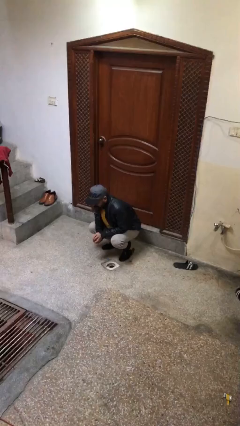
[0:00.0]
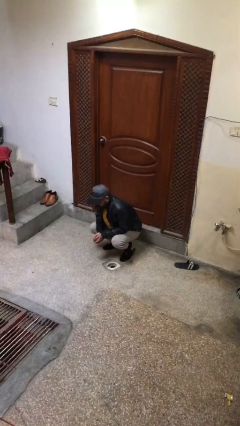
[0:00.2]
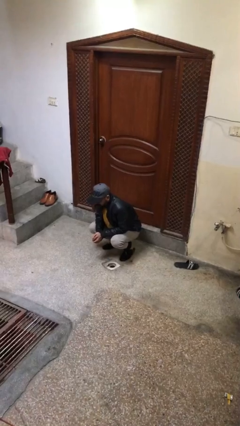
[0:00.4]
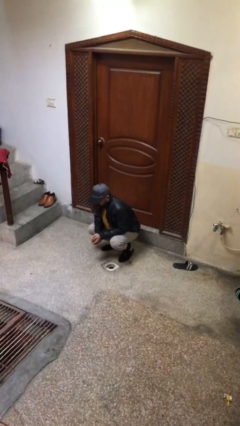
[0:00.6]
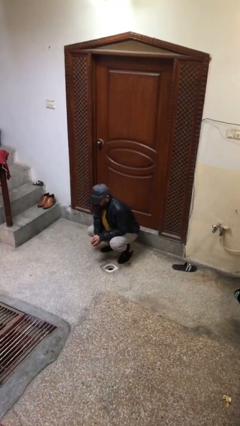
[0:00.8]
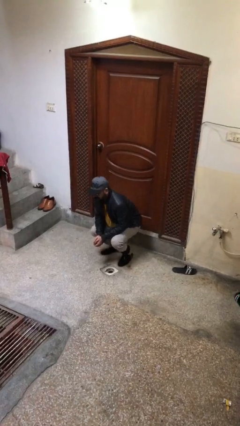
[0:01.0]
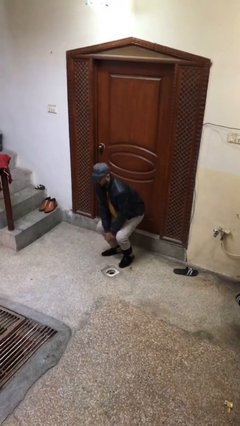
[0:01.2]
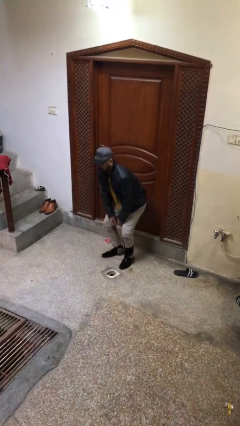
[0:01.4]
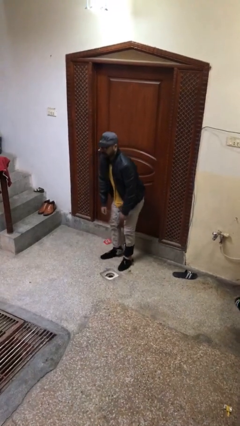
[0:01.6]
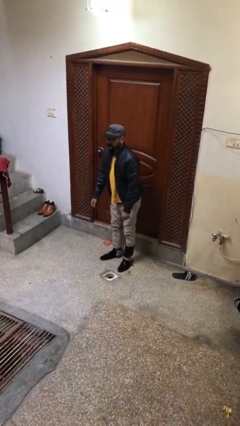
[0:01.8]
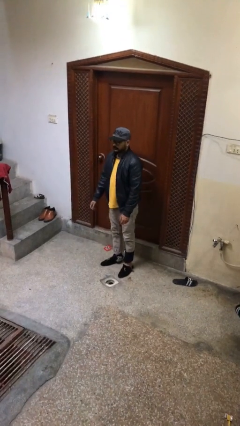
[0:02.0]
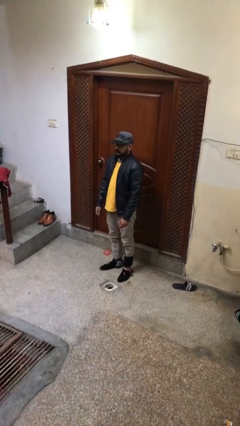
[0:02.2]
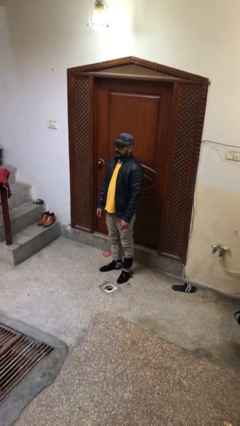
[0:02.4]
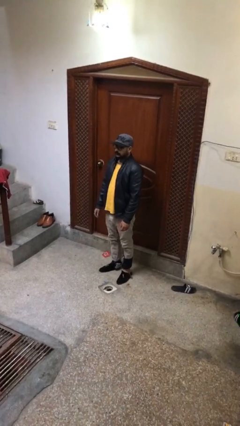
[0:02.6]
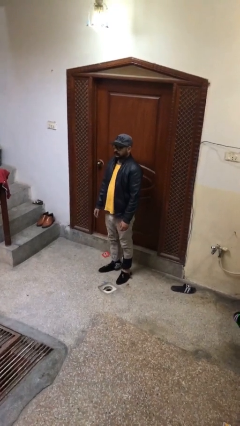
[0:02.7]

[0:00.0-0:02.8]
person stands up

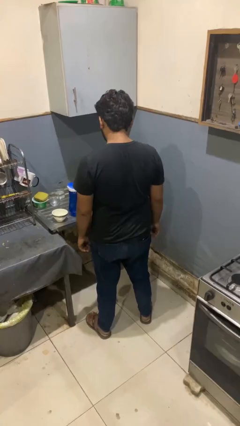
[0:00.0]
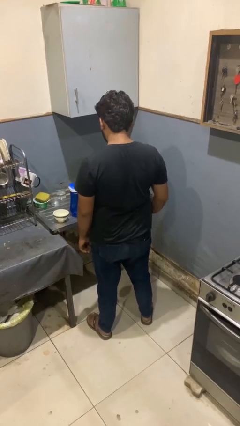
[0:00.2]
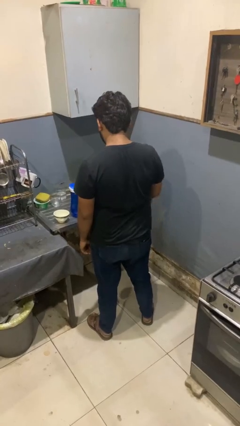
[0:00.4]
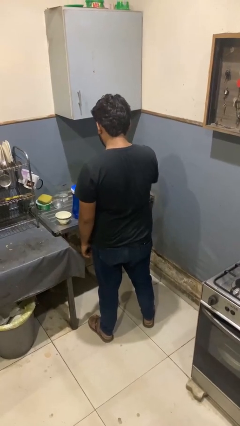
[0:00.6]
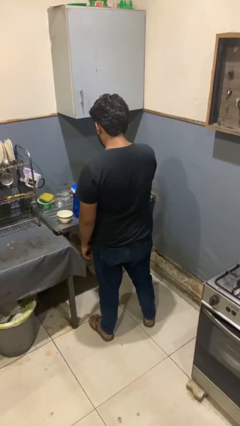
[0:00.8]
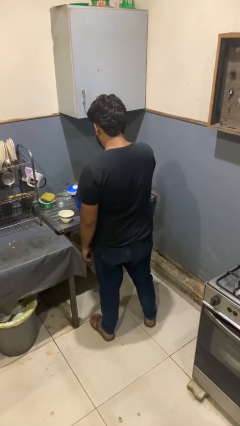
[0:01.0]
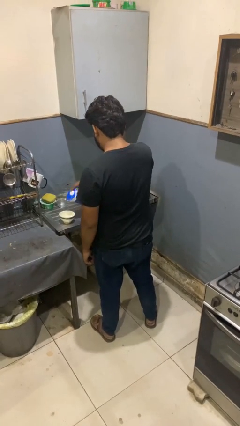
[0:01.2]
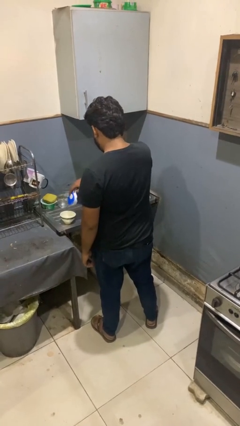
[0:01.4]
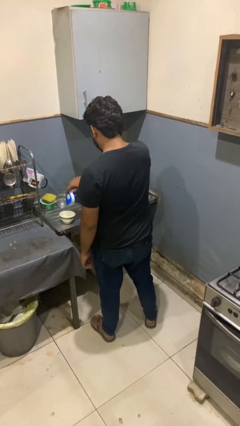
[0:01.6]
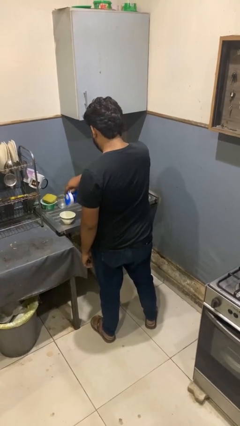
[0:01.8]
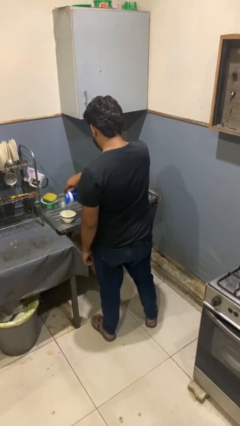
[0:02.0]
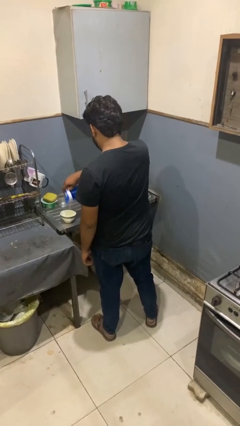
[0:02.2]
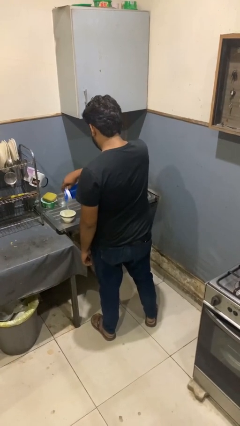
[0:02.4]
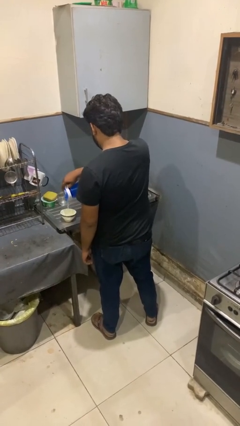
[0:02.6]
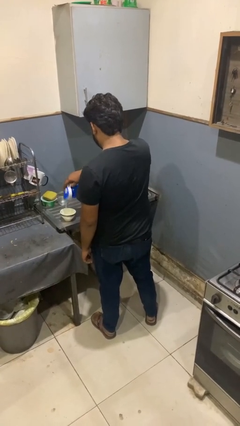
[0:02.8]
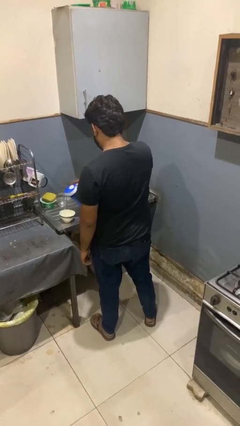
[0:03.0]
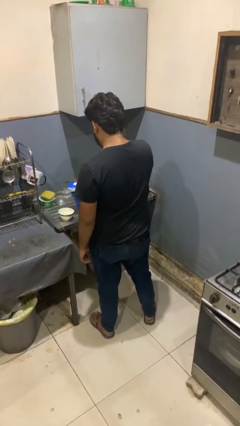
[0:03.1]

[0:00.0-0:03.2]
person pours into bowl

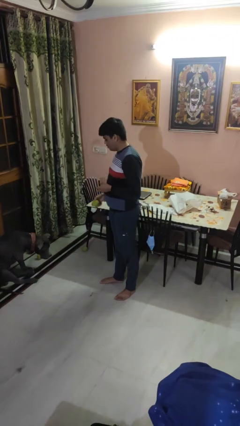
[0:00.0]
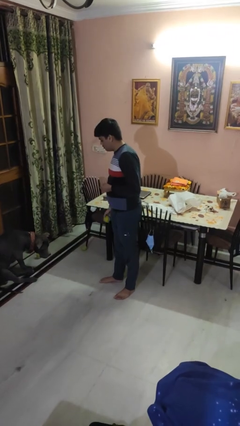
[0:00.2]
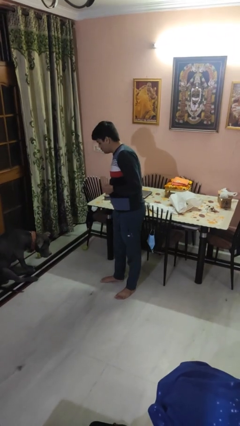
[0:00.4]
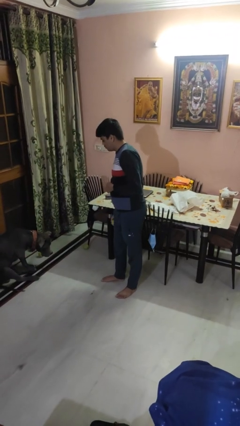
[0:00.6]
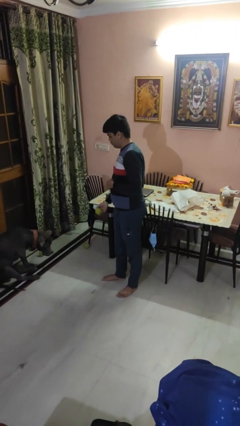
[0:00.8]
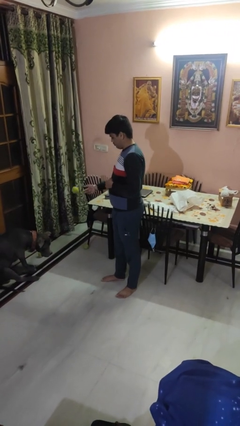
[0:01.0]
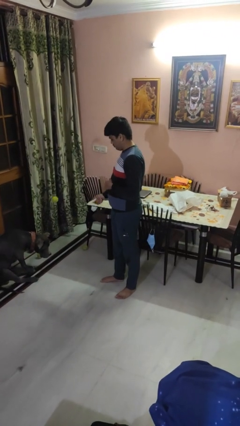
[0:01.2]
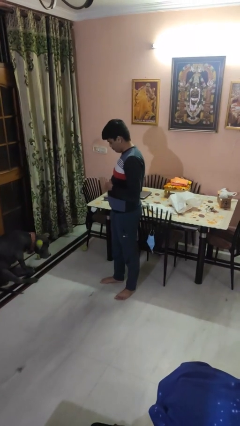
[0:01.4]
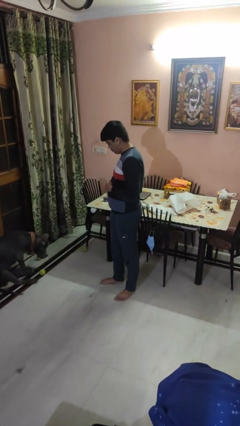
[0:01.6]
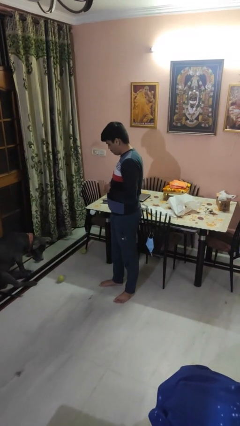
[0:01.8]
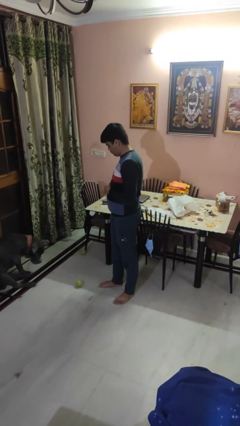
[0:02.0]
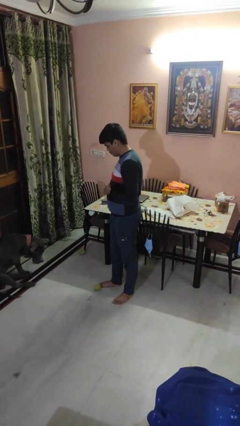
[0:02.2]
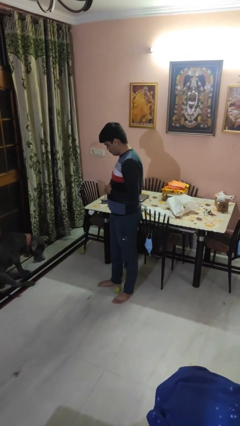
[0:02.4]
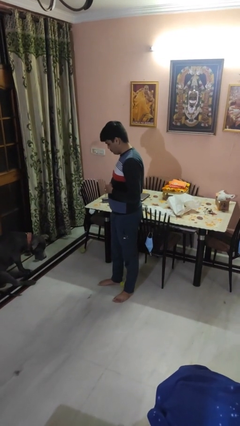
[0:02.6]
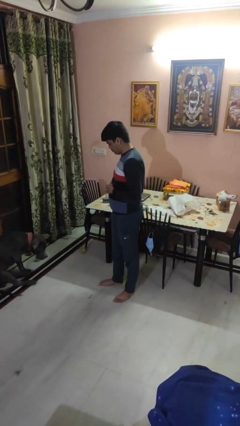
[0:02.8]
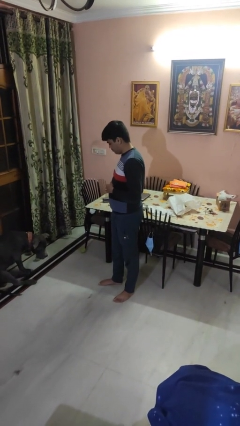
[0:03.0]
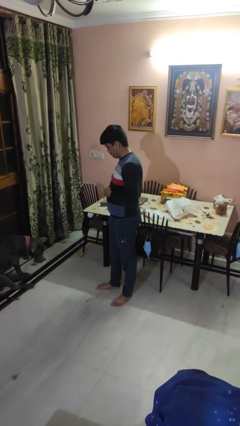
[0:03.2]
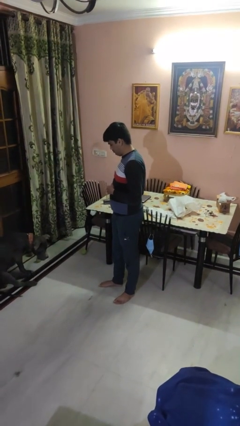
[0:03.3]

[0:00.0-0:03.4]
person throws object to dog

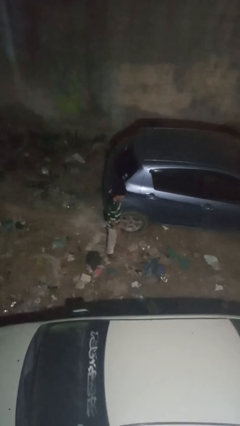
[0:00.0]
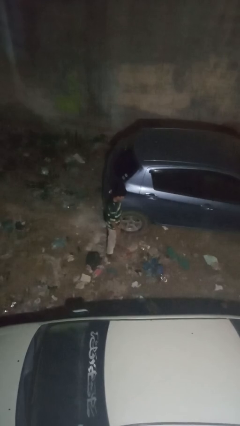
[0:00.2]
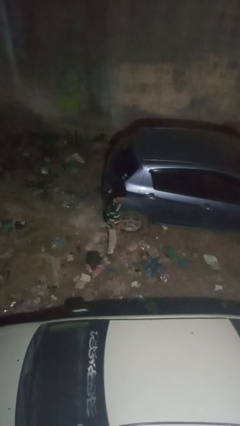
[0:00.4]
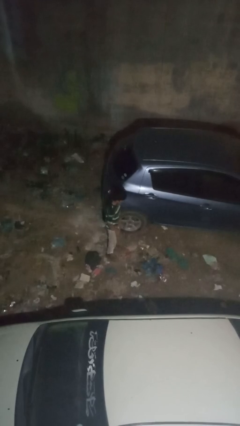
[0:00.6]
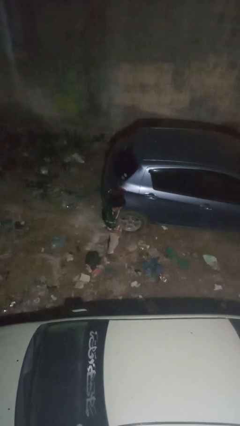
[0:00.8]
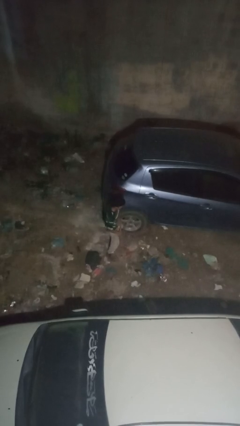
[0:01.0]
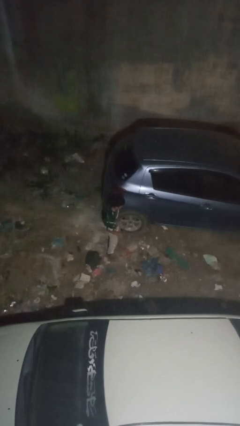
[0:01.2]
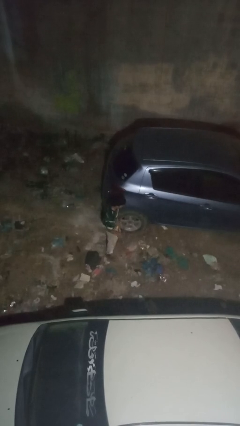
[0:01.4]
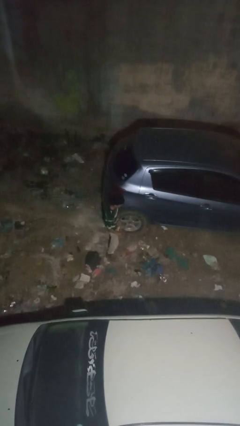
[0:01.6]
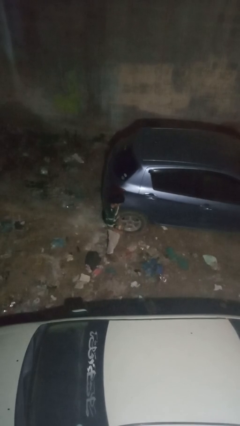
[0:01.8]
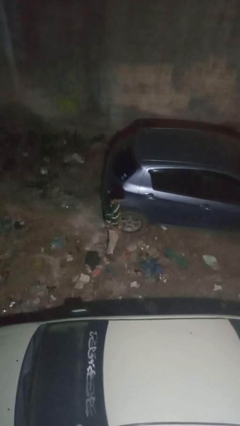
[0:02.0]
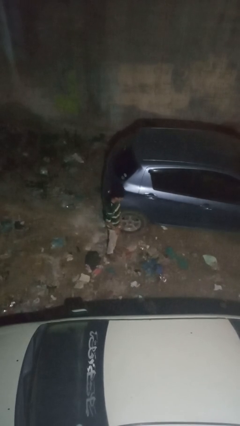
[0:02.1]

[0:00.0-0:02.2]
person kicks car tires

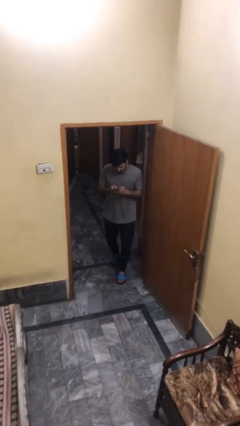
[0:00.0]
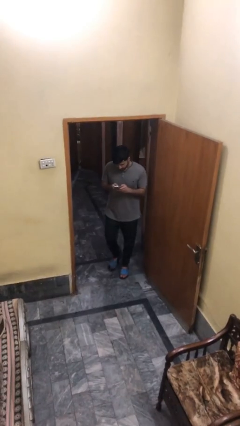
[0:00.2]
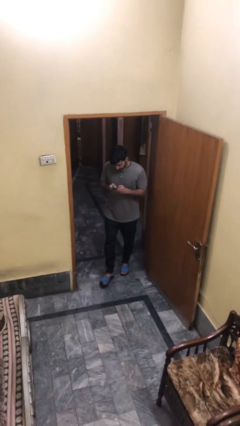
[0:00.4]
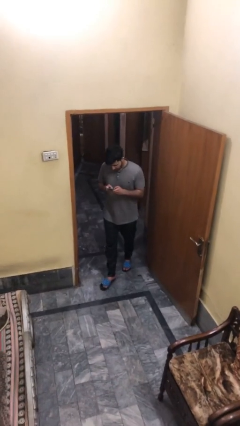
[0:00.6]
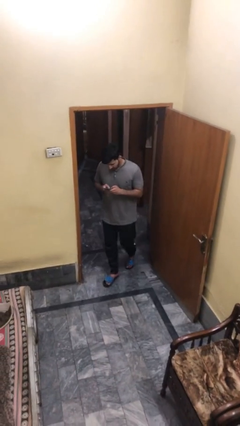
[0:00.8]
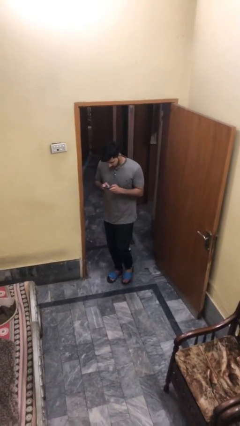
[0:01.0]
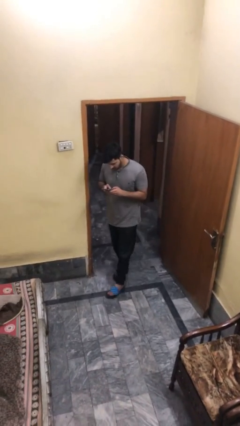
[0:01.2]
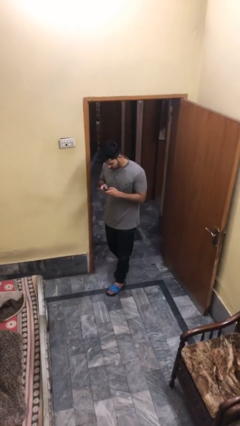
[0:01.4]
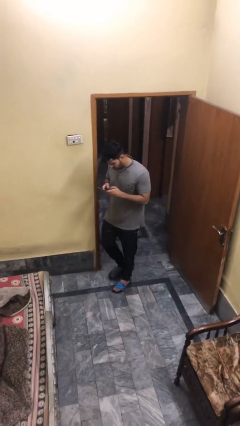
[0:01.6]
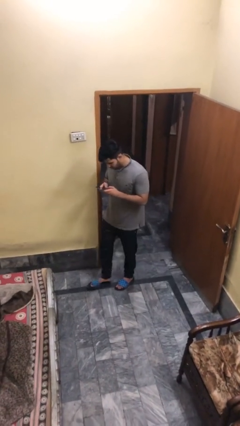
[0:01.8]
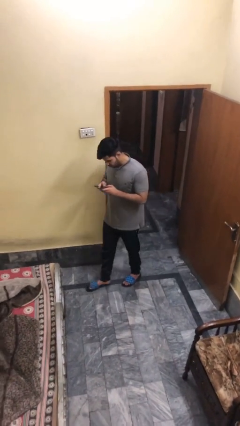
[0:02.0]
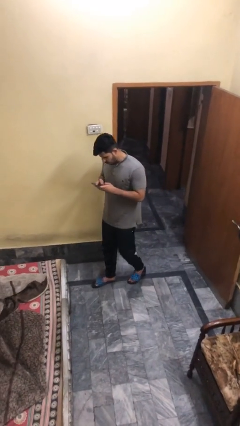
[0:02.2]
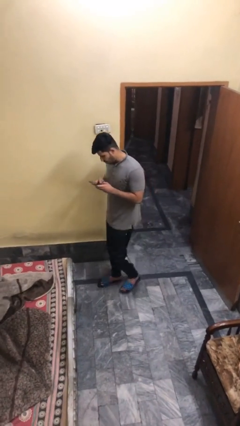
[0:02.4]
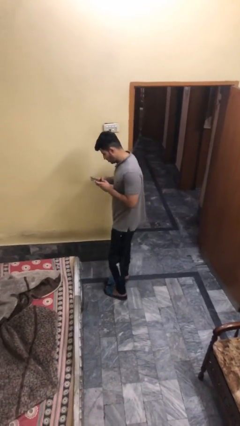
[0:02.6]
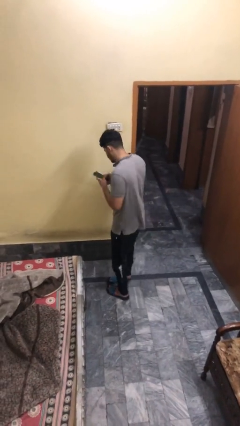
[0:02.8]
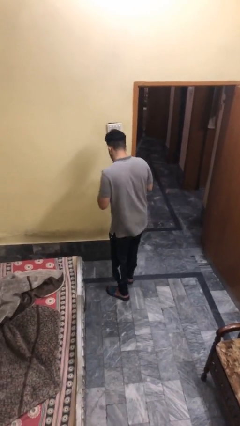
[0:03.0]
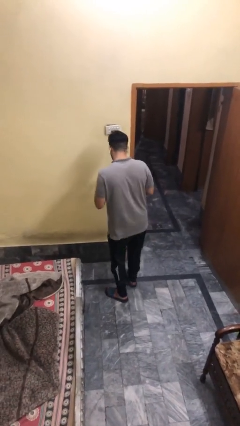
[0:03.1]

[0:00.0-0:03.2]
person enters scene through structure

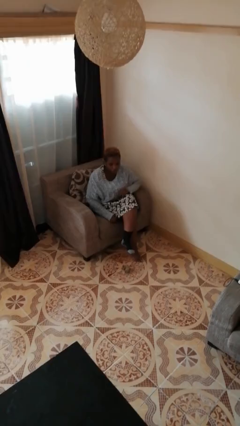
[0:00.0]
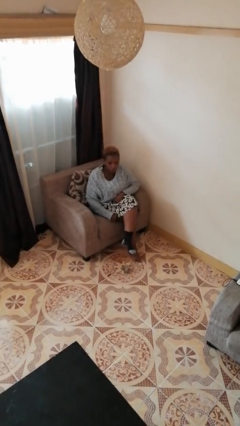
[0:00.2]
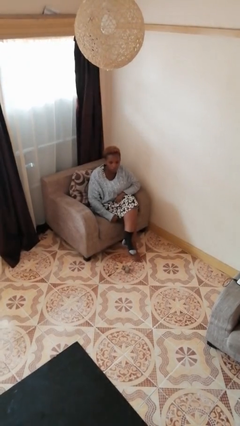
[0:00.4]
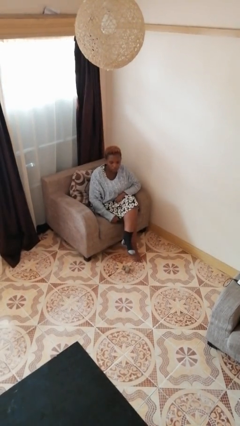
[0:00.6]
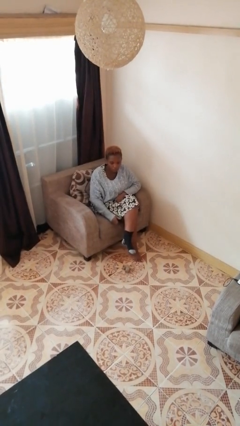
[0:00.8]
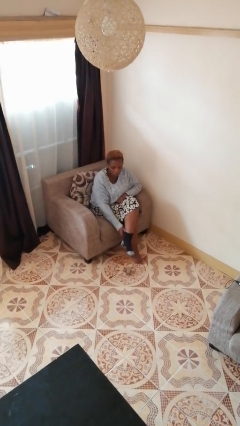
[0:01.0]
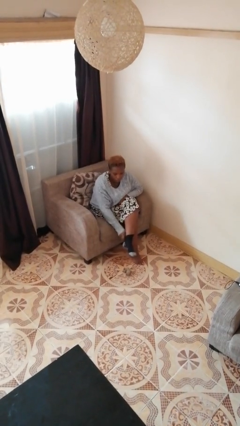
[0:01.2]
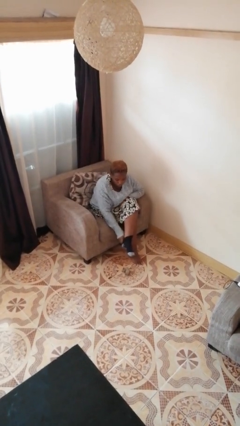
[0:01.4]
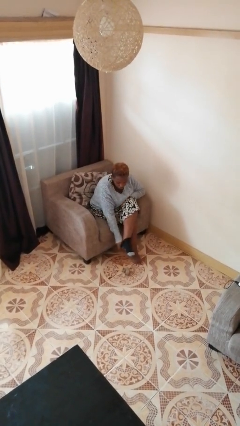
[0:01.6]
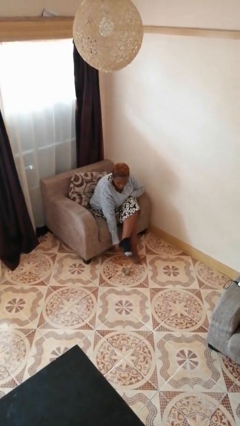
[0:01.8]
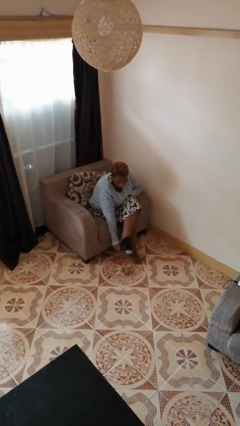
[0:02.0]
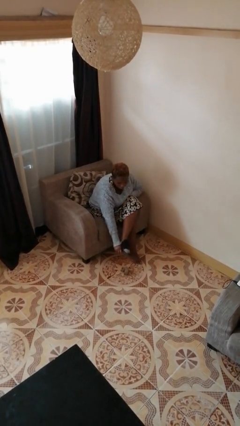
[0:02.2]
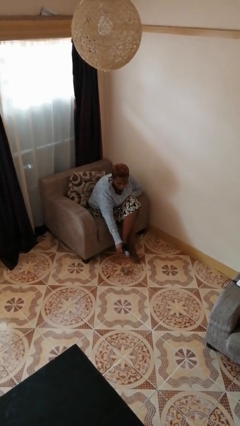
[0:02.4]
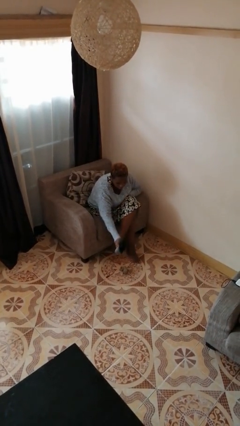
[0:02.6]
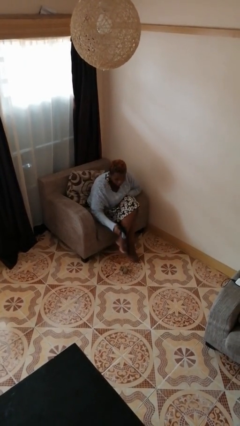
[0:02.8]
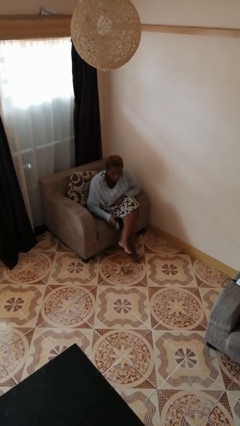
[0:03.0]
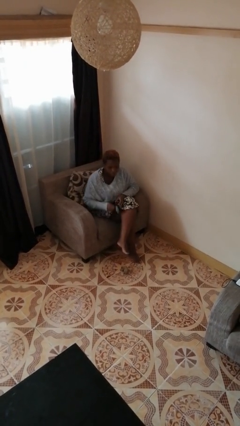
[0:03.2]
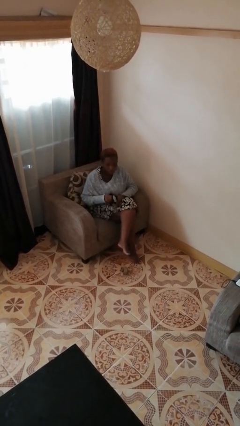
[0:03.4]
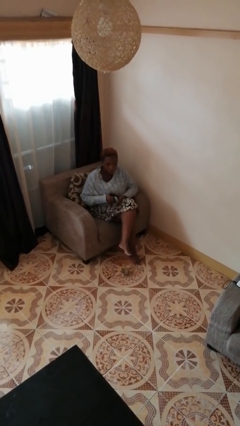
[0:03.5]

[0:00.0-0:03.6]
person takes off socks
